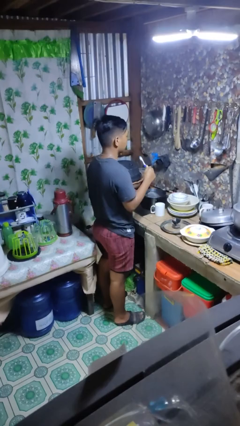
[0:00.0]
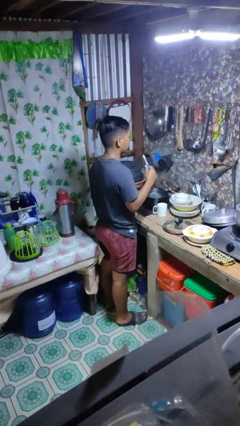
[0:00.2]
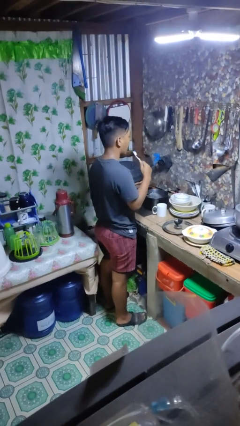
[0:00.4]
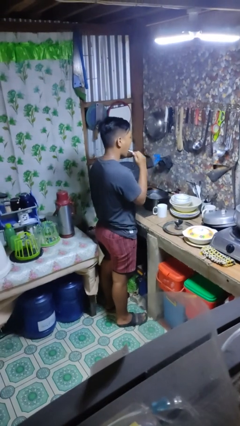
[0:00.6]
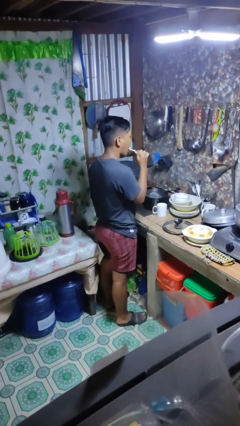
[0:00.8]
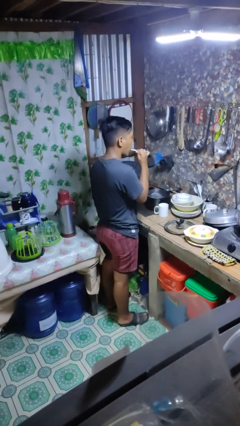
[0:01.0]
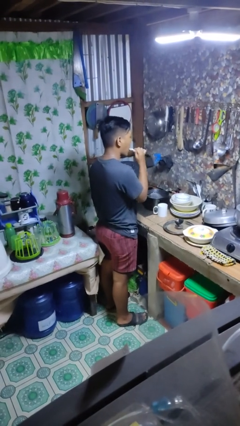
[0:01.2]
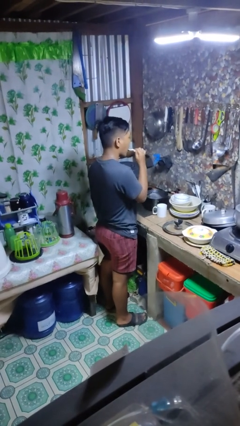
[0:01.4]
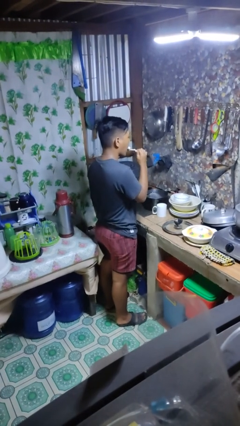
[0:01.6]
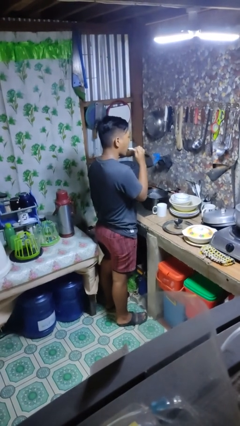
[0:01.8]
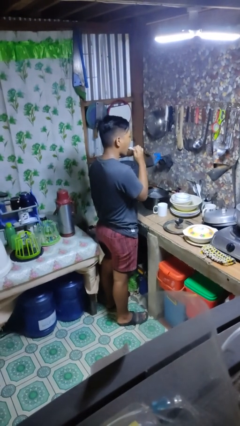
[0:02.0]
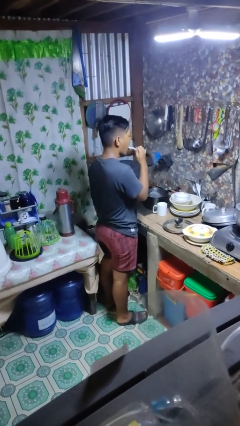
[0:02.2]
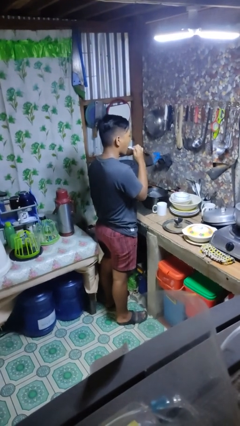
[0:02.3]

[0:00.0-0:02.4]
person brushes teeth

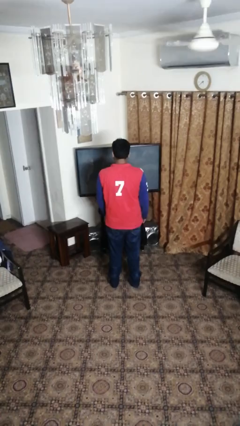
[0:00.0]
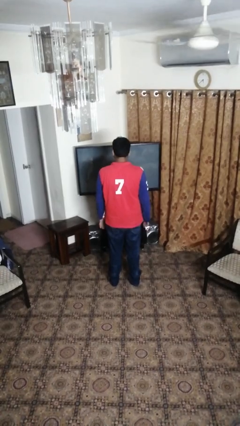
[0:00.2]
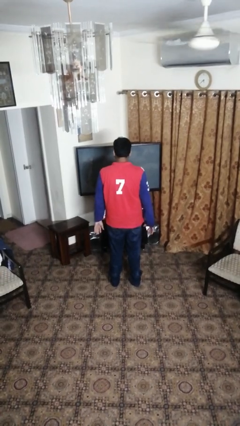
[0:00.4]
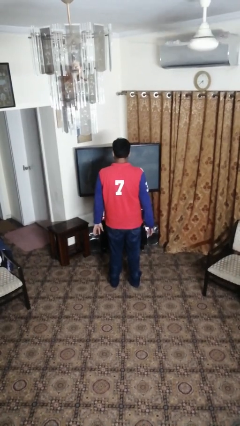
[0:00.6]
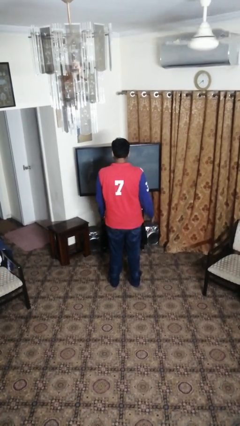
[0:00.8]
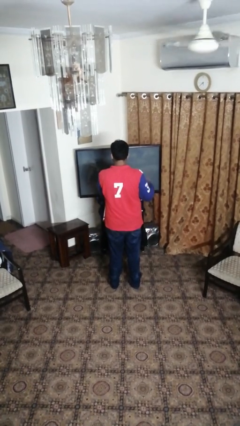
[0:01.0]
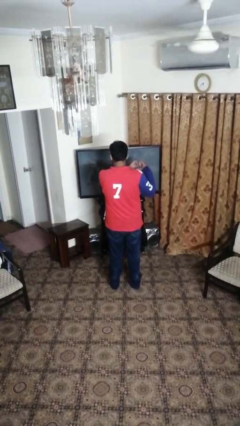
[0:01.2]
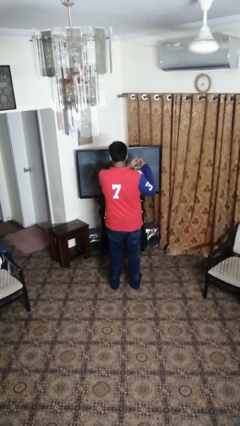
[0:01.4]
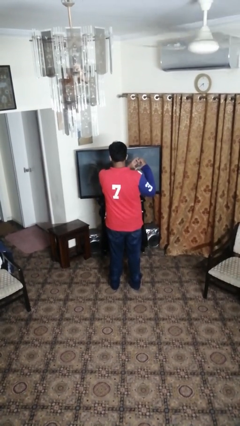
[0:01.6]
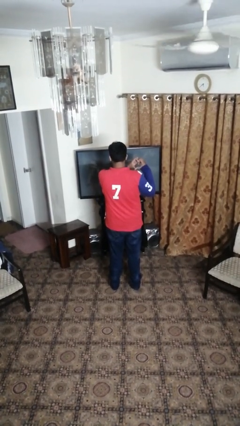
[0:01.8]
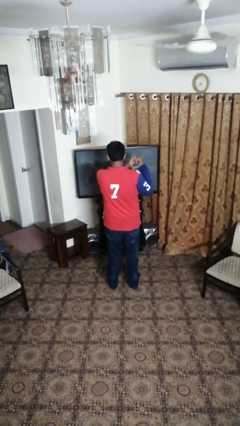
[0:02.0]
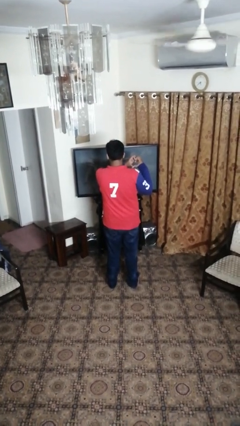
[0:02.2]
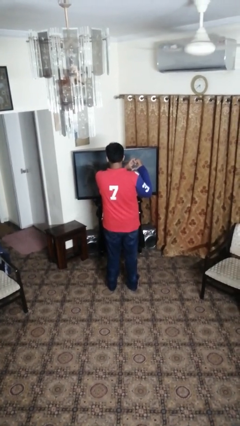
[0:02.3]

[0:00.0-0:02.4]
person gestures heart

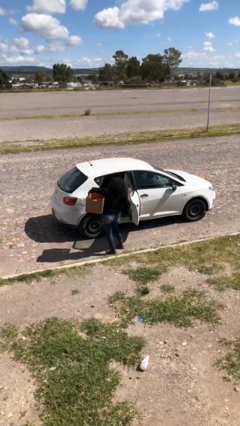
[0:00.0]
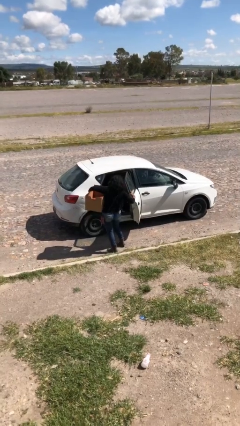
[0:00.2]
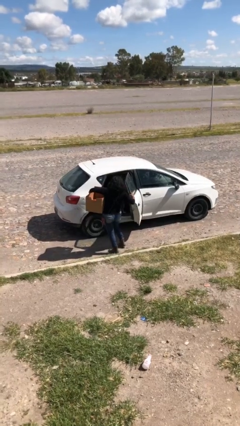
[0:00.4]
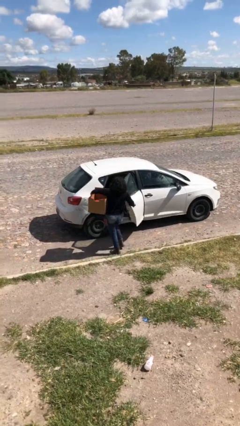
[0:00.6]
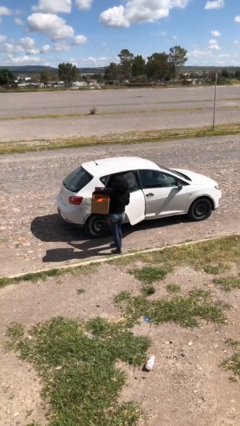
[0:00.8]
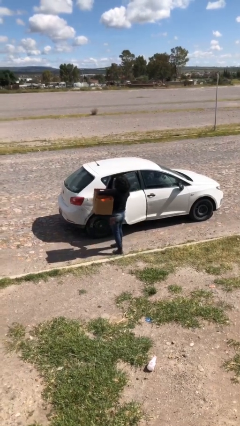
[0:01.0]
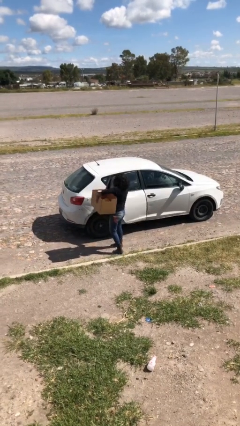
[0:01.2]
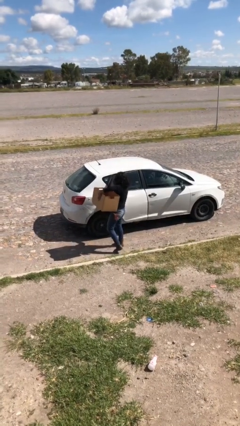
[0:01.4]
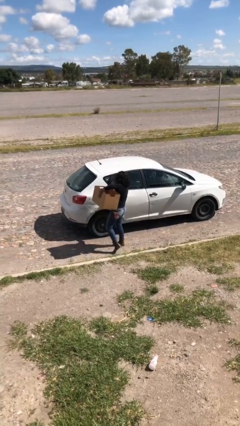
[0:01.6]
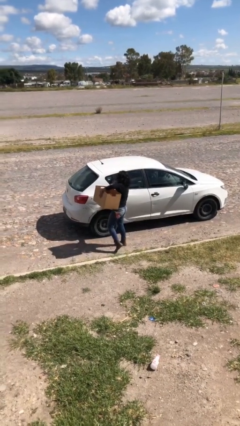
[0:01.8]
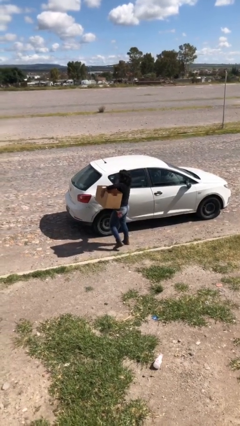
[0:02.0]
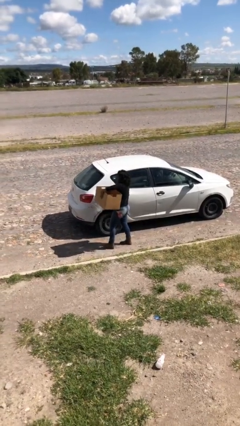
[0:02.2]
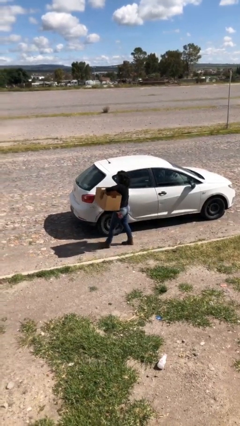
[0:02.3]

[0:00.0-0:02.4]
person closes car door

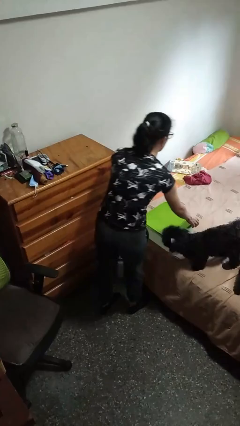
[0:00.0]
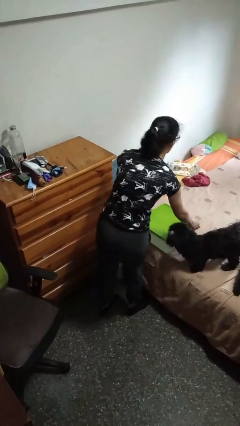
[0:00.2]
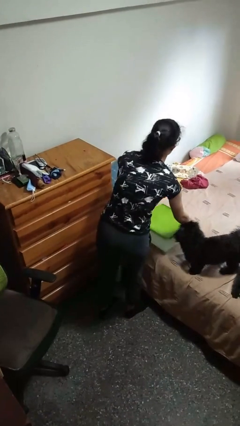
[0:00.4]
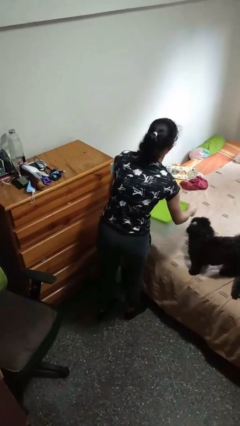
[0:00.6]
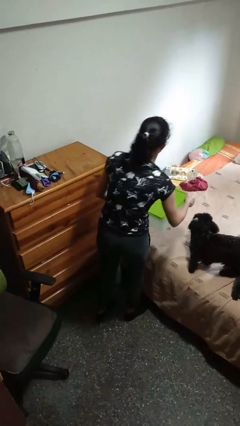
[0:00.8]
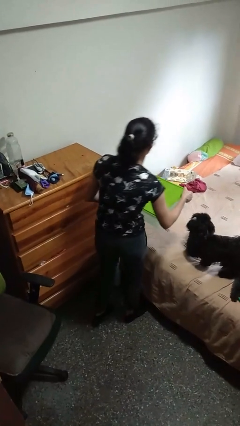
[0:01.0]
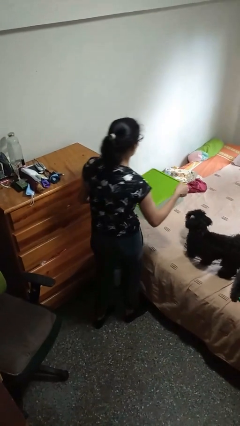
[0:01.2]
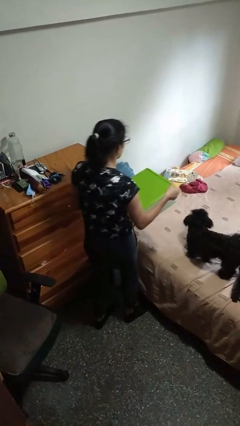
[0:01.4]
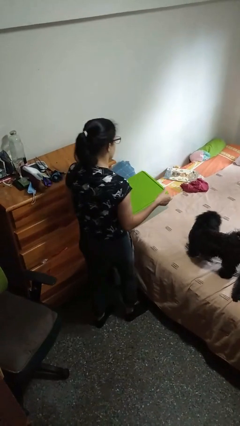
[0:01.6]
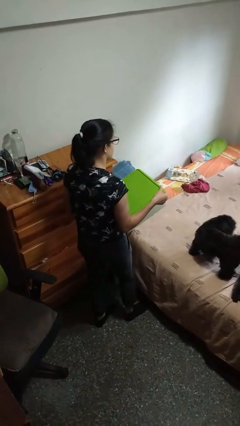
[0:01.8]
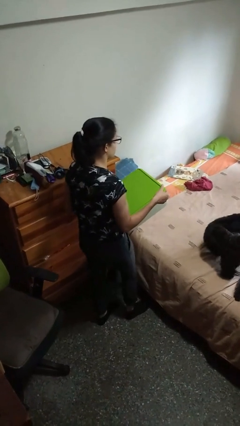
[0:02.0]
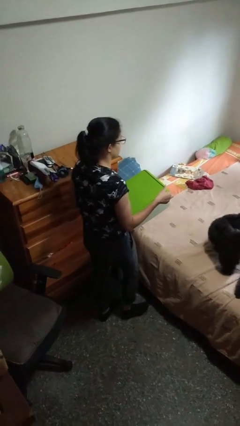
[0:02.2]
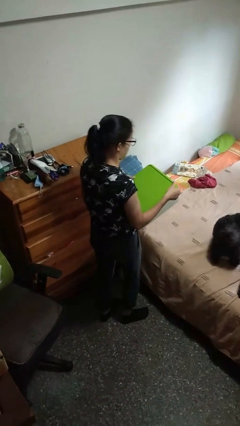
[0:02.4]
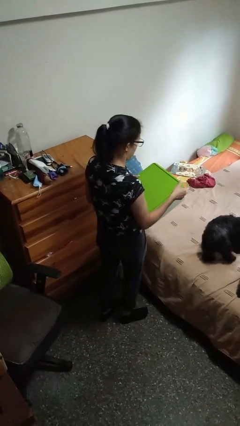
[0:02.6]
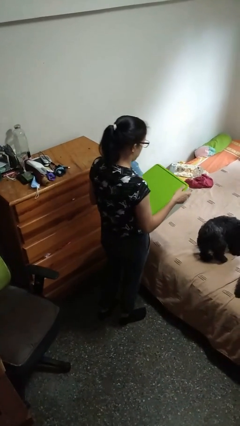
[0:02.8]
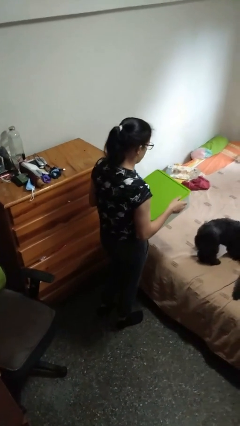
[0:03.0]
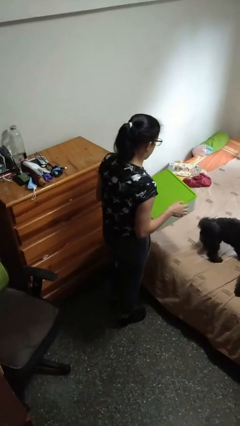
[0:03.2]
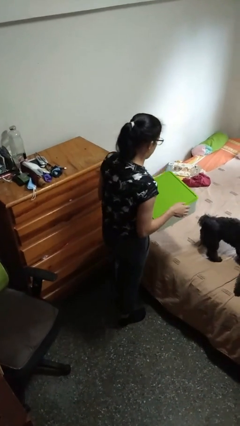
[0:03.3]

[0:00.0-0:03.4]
person picks up object from bed

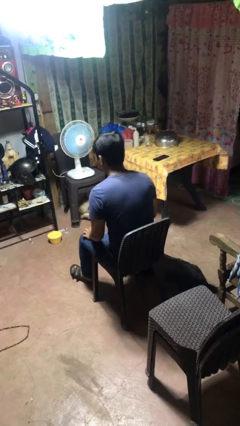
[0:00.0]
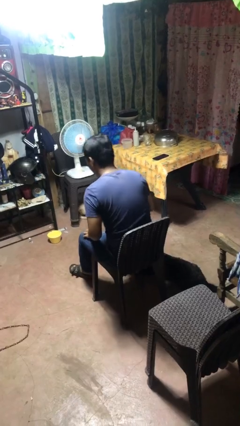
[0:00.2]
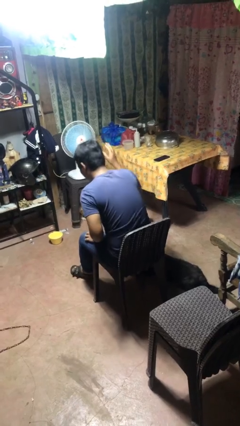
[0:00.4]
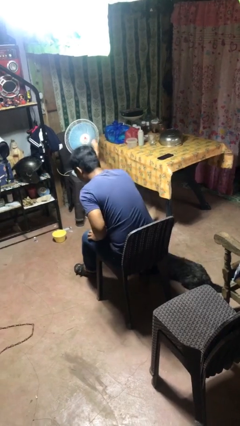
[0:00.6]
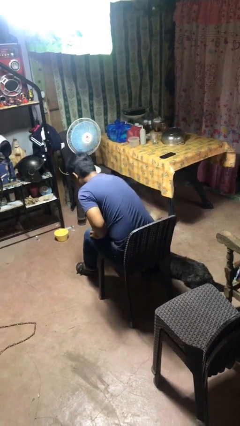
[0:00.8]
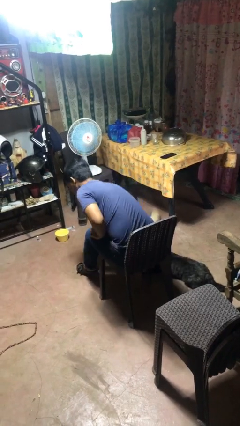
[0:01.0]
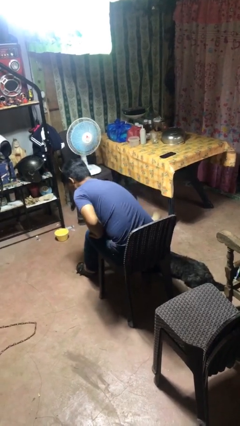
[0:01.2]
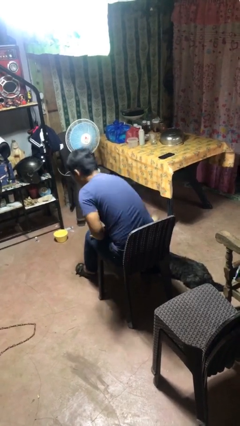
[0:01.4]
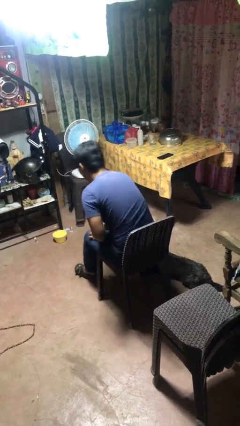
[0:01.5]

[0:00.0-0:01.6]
person swats bug

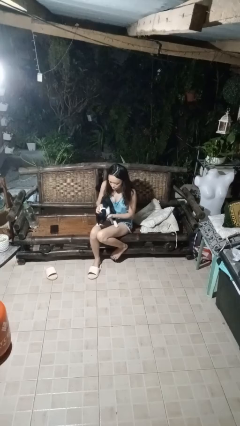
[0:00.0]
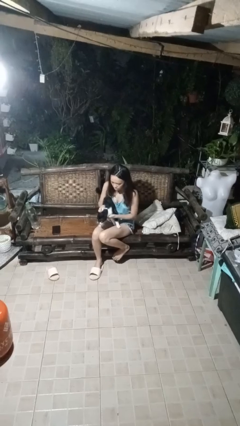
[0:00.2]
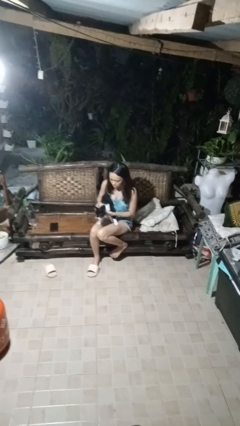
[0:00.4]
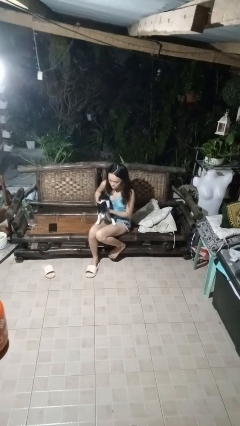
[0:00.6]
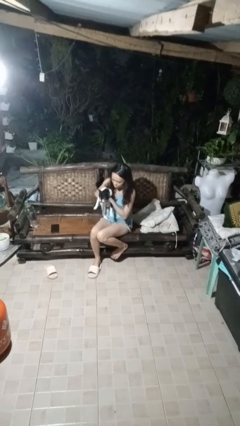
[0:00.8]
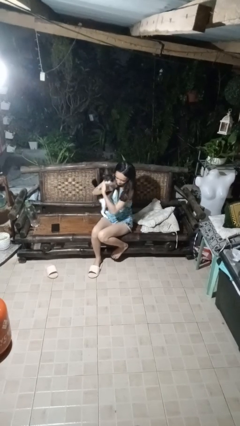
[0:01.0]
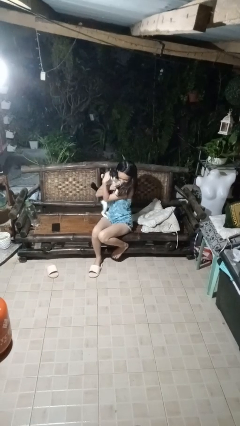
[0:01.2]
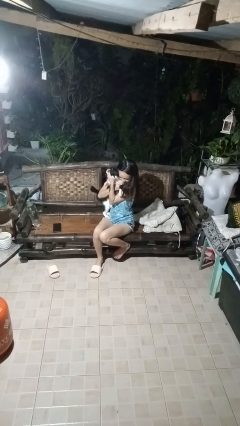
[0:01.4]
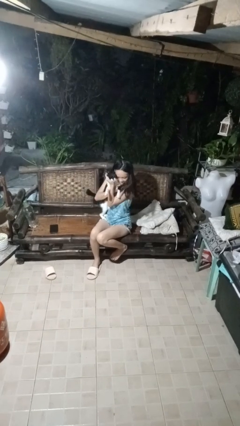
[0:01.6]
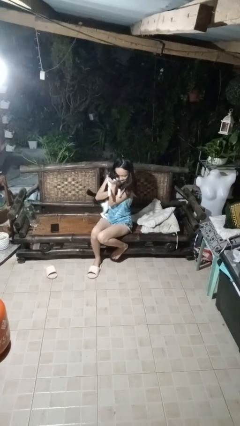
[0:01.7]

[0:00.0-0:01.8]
person hugs cat

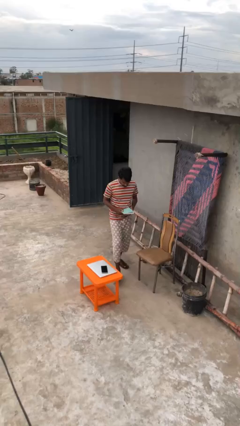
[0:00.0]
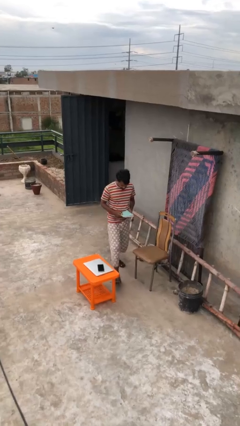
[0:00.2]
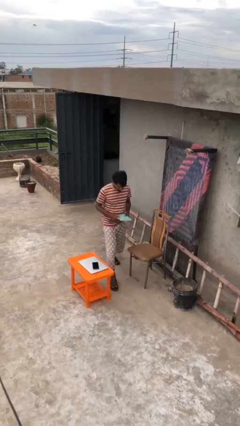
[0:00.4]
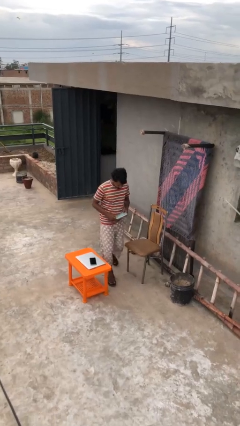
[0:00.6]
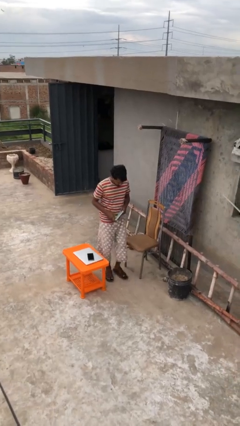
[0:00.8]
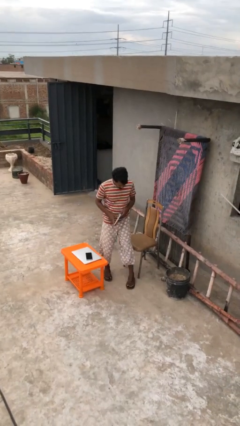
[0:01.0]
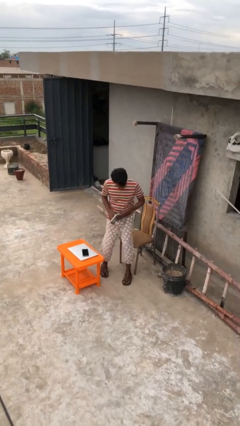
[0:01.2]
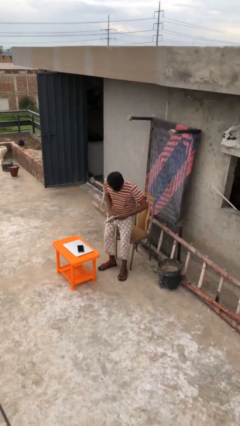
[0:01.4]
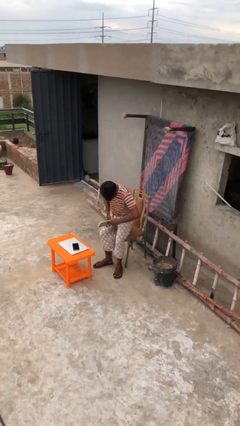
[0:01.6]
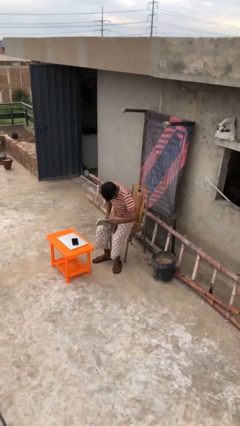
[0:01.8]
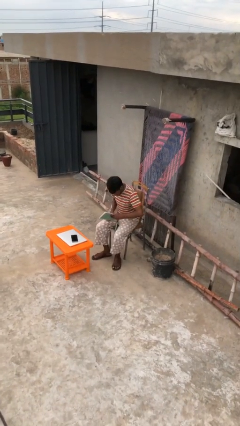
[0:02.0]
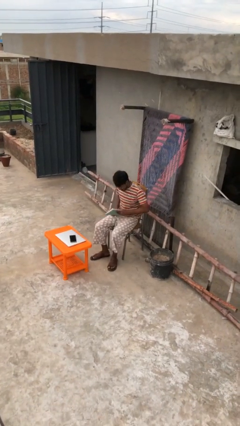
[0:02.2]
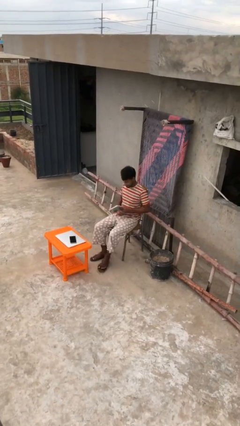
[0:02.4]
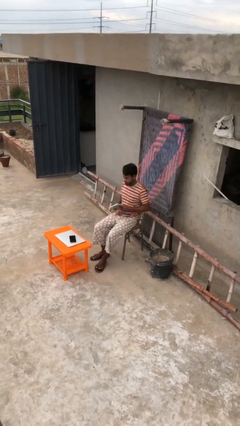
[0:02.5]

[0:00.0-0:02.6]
person sits down

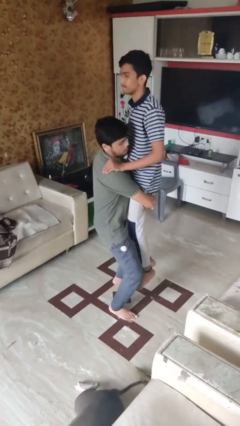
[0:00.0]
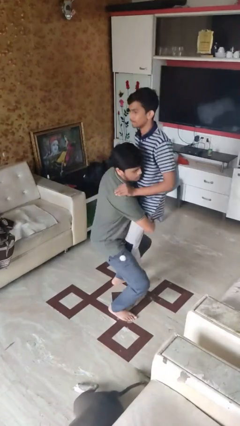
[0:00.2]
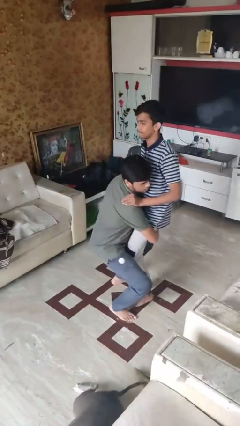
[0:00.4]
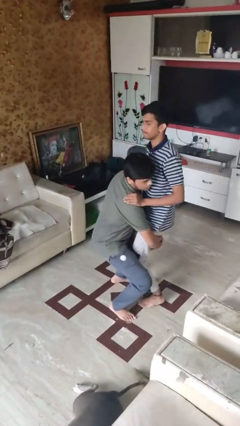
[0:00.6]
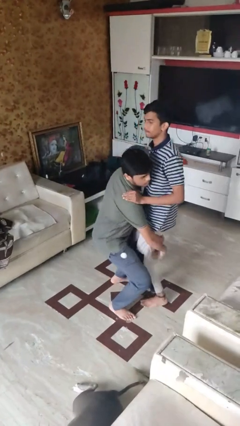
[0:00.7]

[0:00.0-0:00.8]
person puts down person
